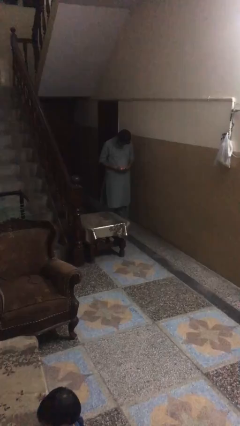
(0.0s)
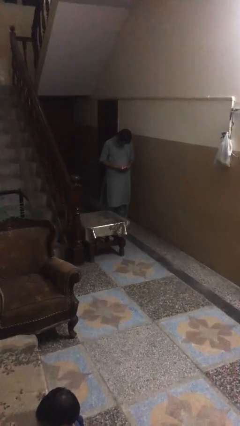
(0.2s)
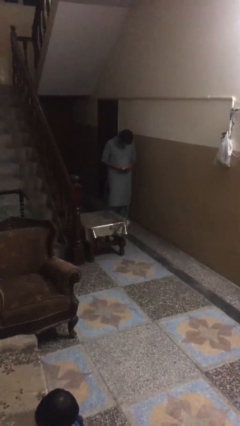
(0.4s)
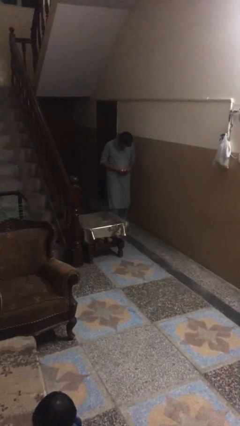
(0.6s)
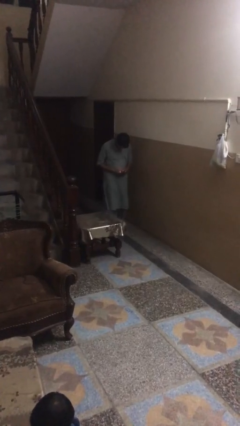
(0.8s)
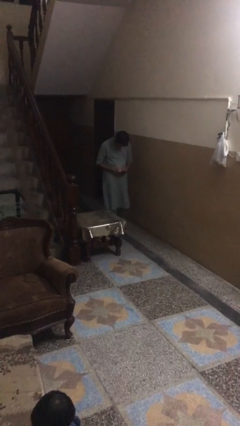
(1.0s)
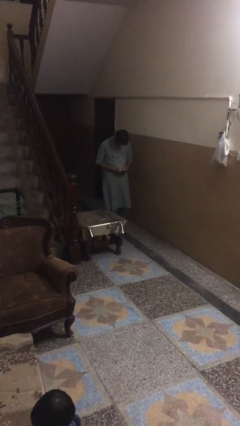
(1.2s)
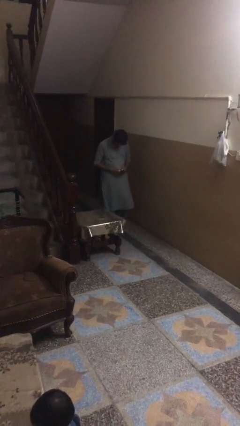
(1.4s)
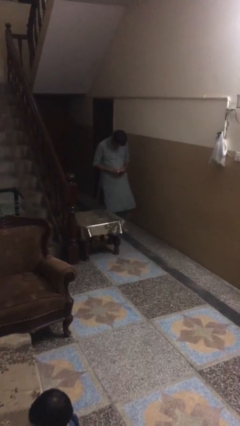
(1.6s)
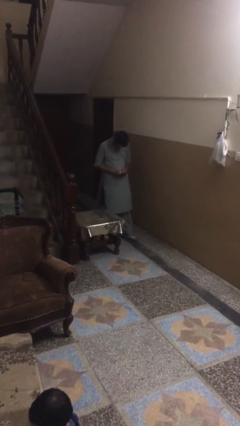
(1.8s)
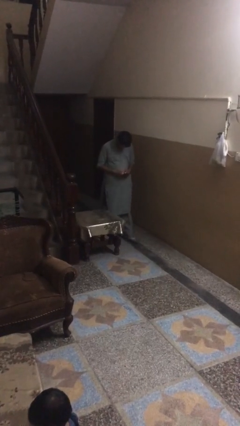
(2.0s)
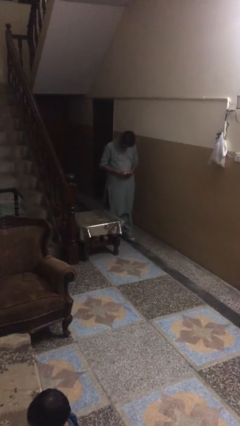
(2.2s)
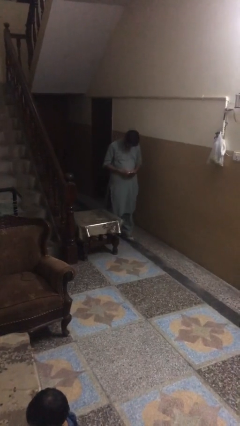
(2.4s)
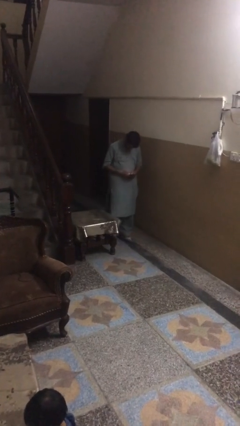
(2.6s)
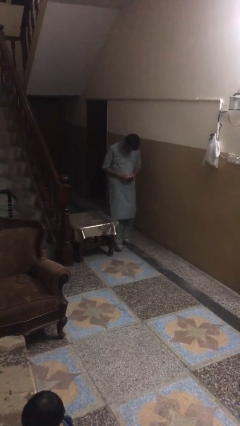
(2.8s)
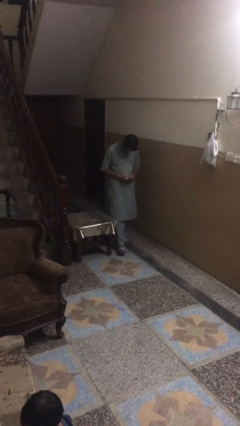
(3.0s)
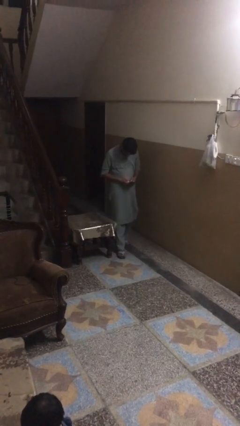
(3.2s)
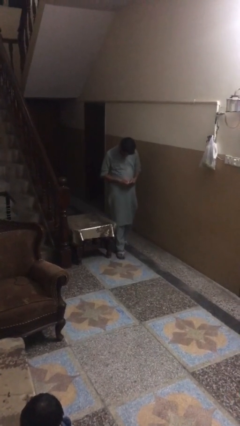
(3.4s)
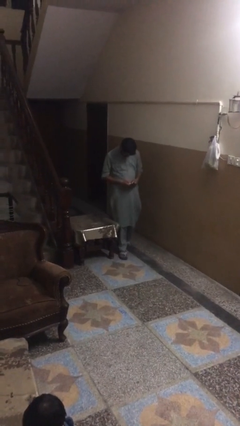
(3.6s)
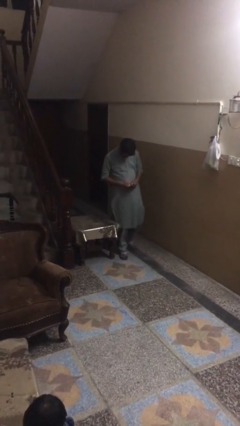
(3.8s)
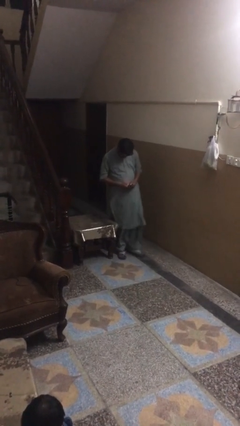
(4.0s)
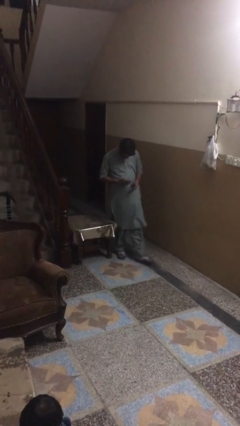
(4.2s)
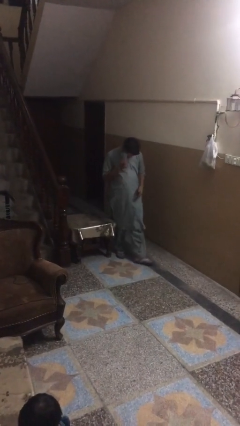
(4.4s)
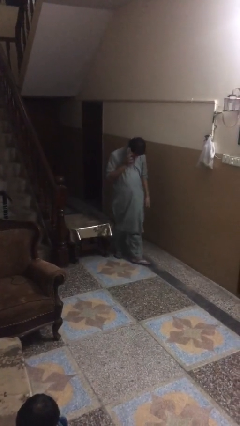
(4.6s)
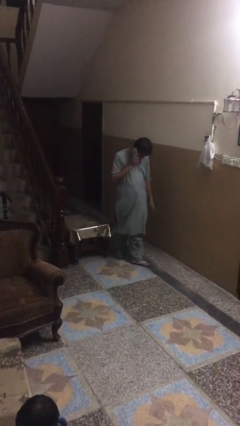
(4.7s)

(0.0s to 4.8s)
person texts on phone

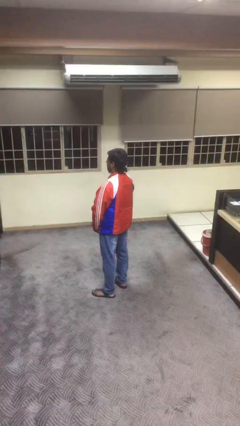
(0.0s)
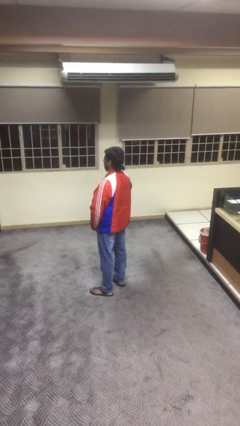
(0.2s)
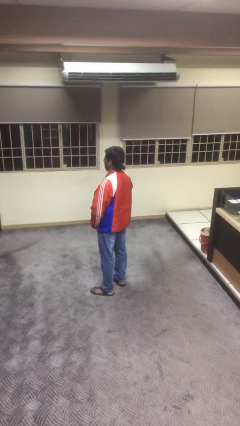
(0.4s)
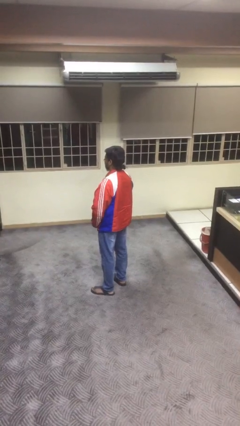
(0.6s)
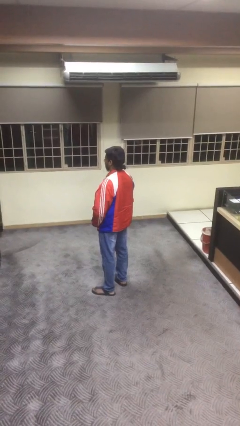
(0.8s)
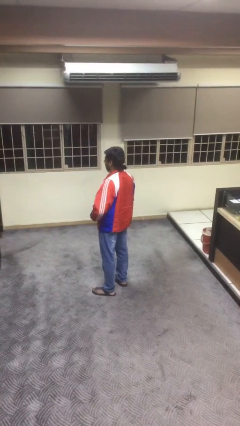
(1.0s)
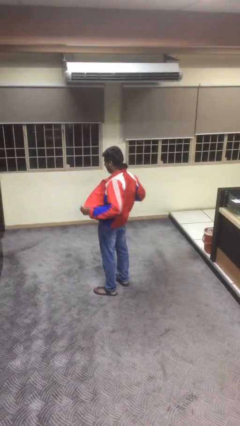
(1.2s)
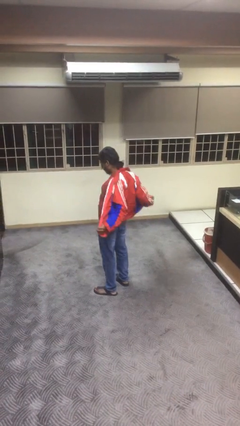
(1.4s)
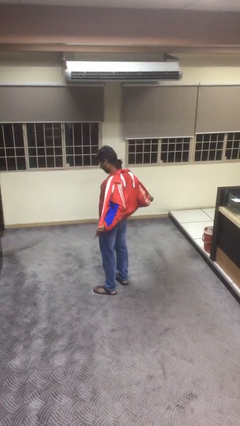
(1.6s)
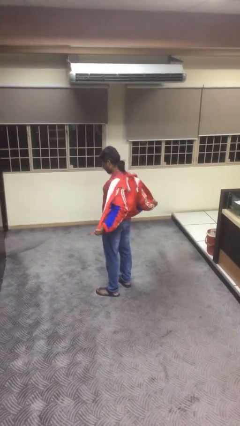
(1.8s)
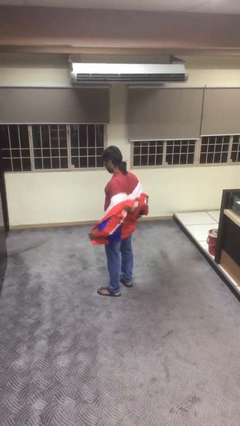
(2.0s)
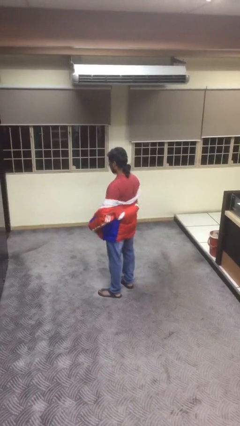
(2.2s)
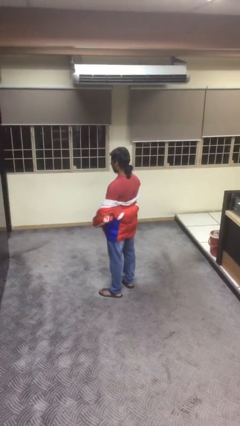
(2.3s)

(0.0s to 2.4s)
person takes off jacket

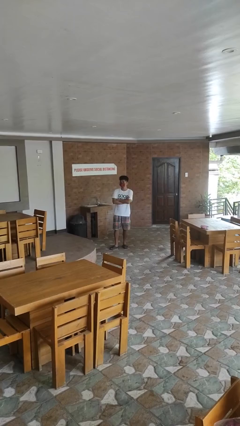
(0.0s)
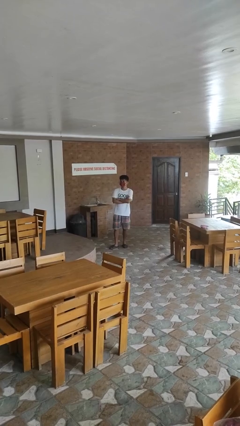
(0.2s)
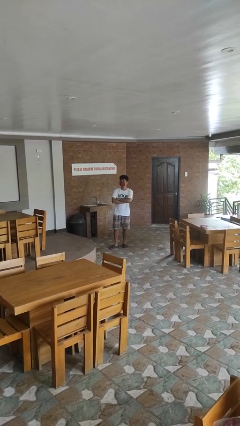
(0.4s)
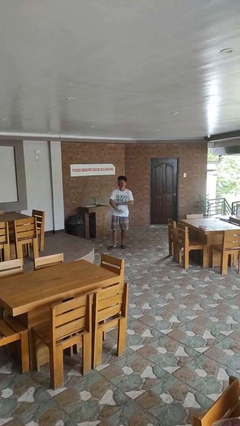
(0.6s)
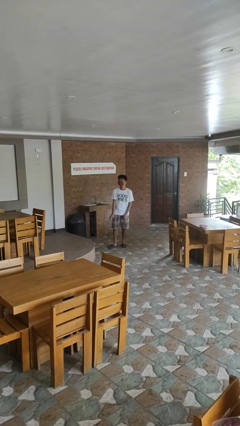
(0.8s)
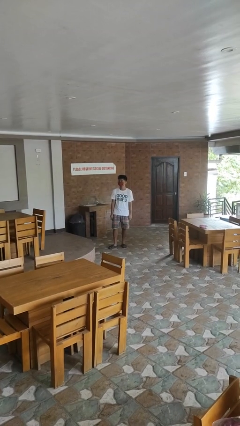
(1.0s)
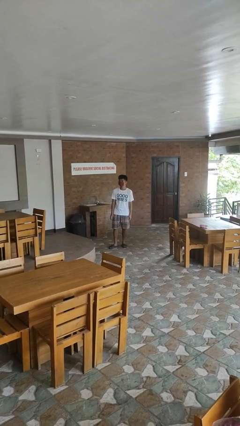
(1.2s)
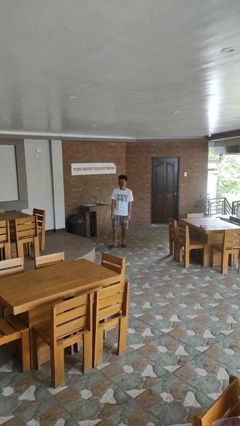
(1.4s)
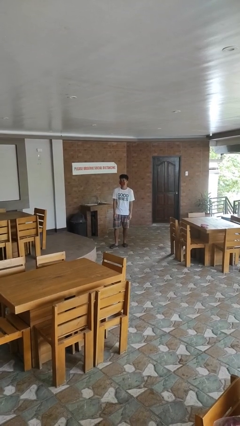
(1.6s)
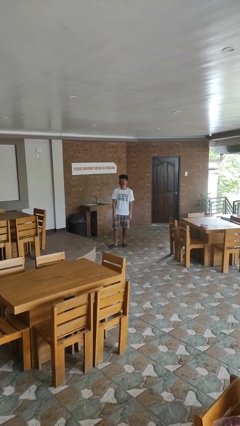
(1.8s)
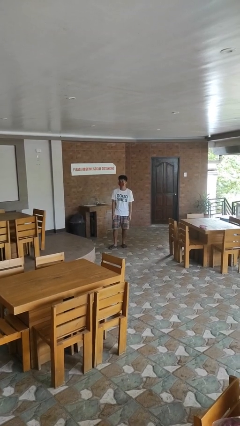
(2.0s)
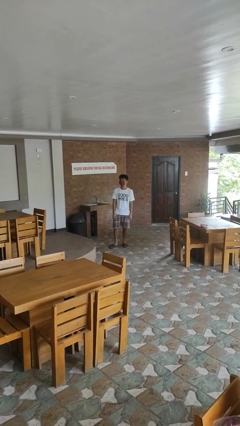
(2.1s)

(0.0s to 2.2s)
person brushes teeth

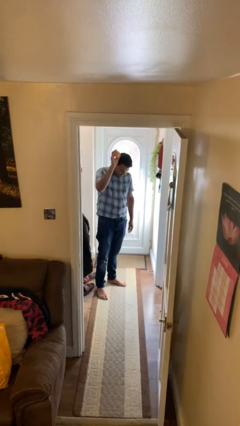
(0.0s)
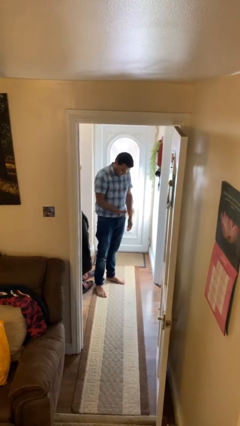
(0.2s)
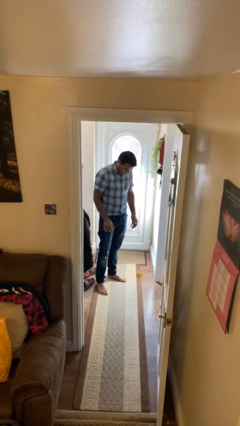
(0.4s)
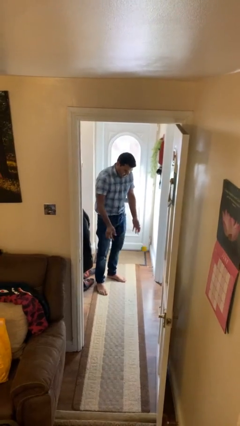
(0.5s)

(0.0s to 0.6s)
person bounces ball on floor

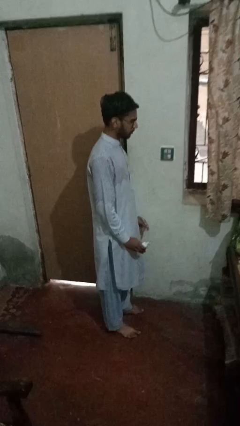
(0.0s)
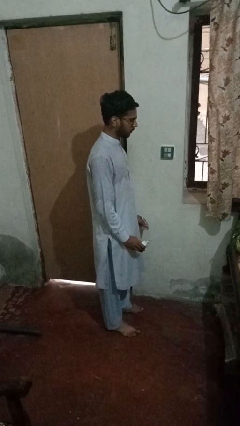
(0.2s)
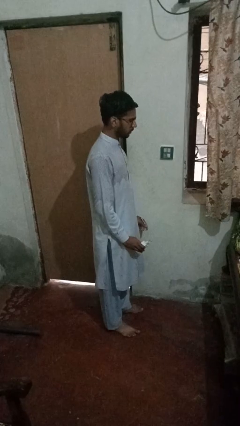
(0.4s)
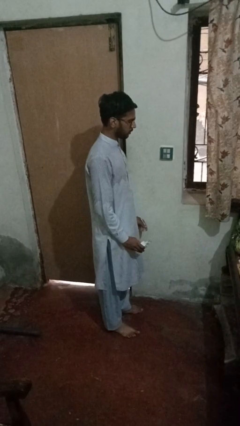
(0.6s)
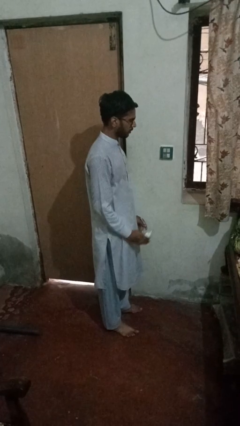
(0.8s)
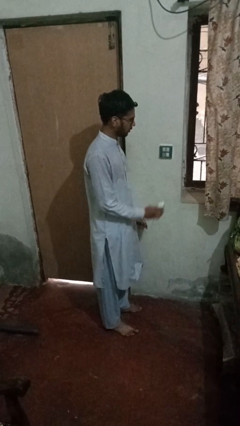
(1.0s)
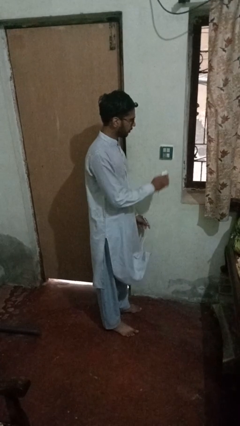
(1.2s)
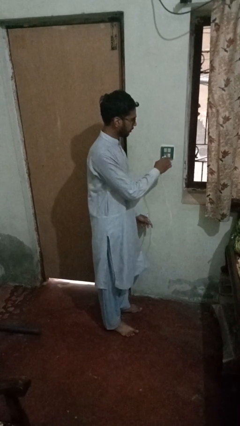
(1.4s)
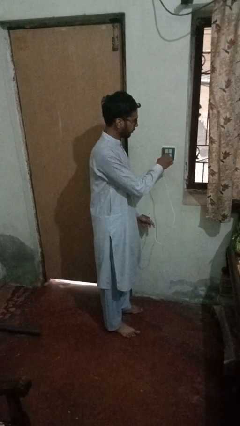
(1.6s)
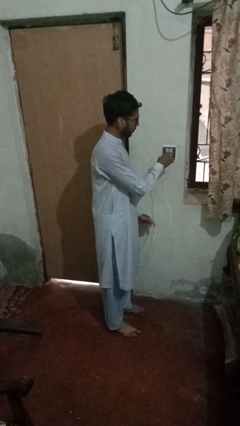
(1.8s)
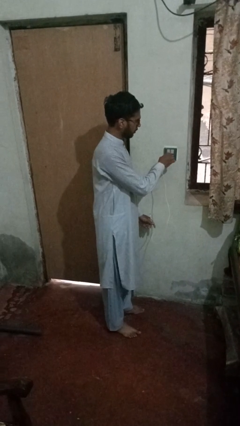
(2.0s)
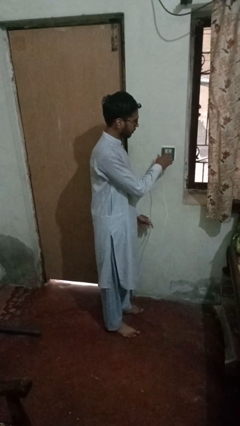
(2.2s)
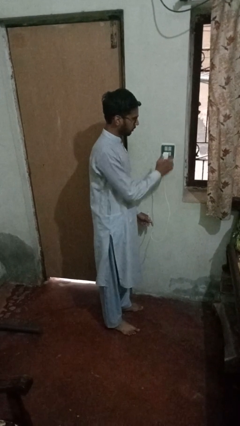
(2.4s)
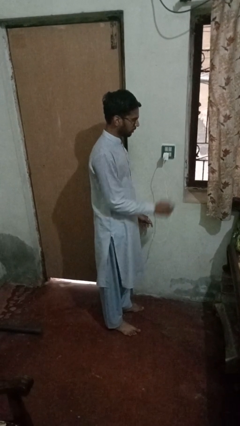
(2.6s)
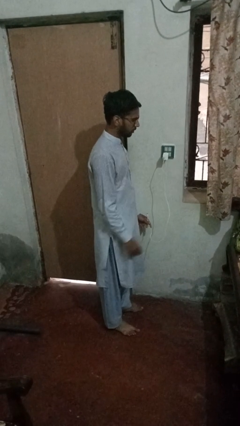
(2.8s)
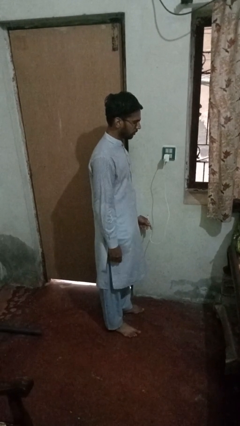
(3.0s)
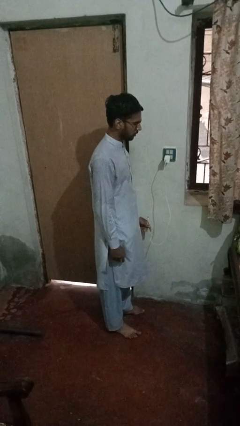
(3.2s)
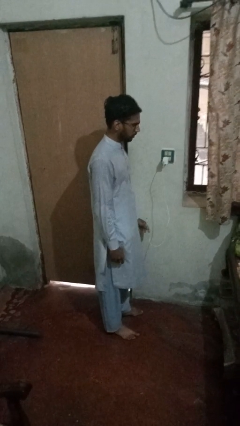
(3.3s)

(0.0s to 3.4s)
person plugs into electrical socket

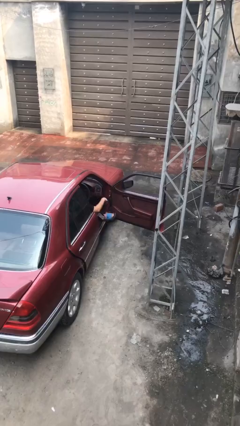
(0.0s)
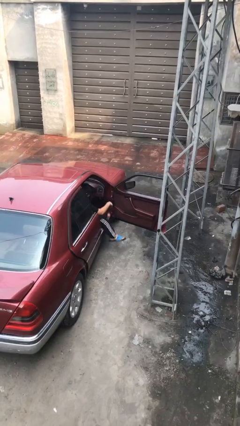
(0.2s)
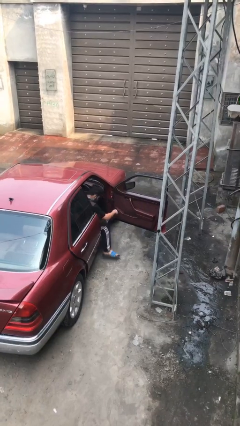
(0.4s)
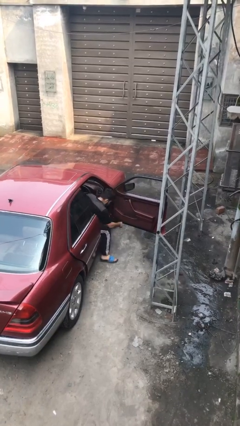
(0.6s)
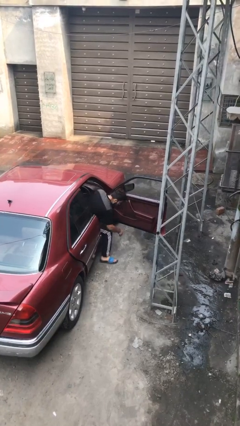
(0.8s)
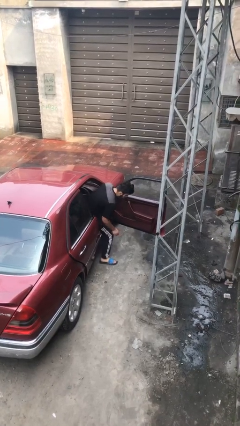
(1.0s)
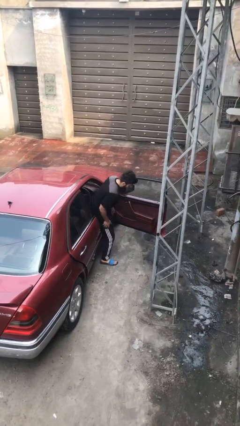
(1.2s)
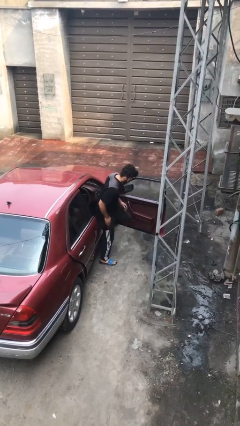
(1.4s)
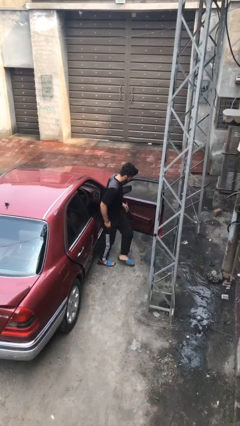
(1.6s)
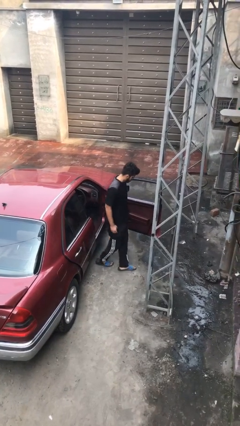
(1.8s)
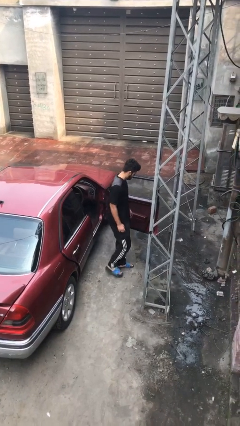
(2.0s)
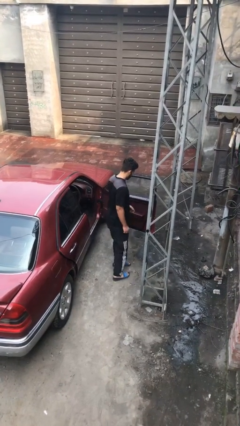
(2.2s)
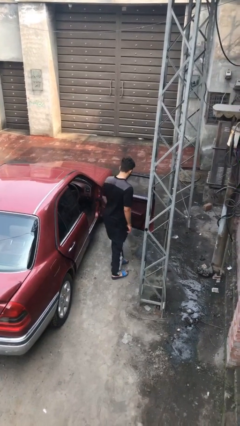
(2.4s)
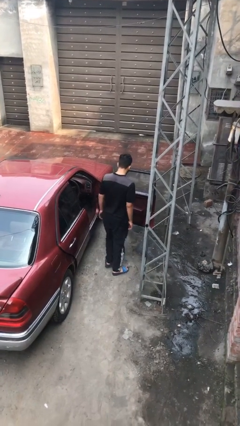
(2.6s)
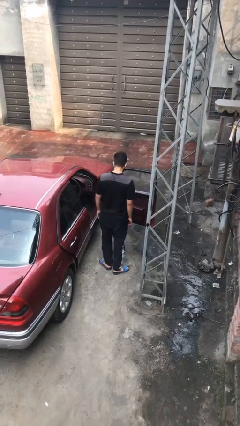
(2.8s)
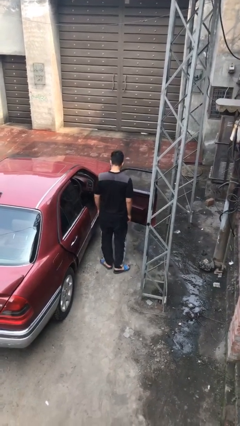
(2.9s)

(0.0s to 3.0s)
person exits car

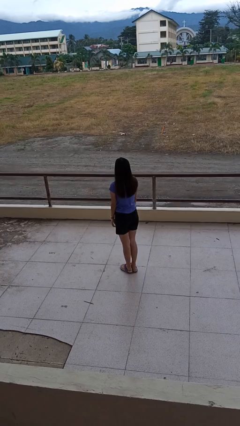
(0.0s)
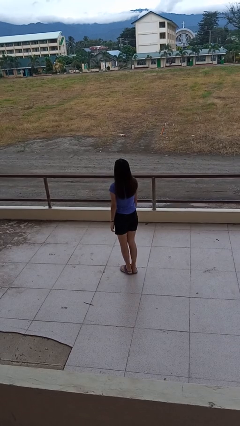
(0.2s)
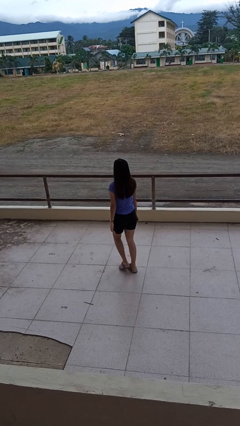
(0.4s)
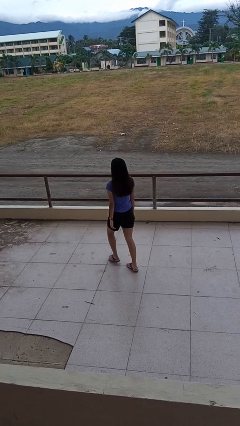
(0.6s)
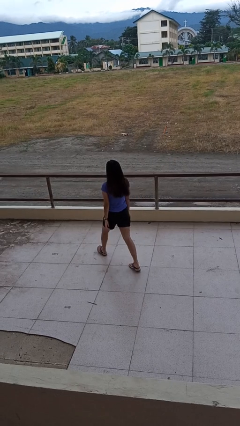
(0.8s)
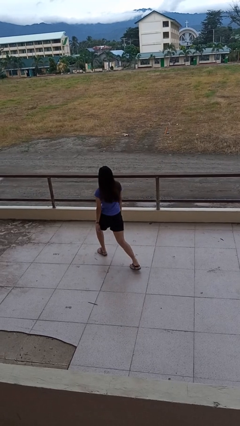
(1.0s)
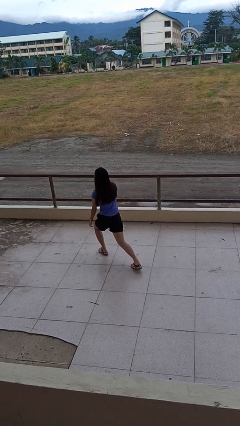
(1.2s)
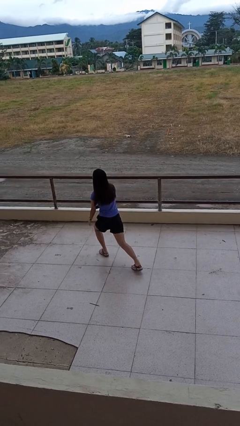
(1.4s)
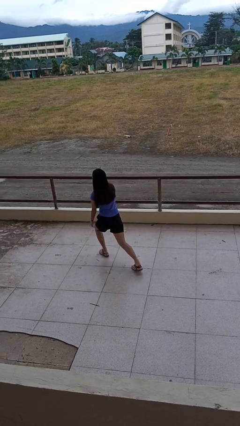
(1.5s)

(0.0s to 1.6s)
person exercises with lunges
